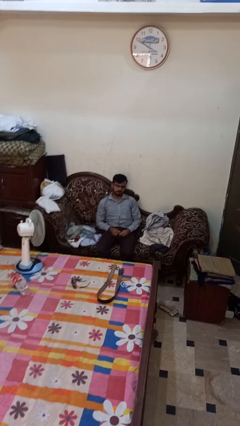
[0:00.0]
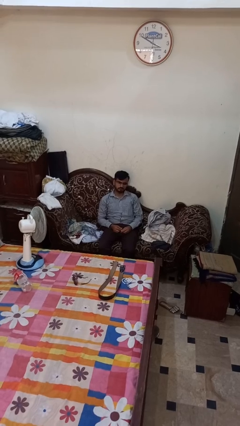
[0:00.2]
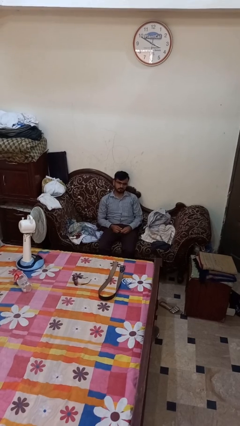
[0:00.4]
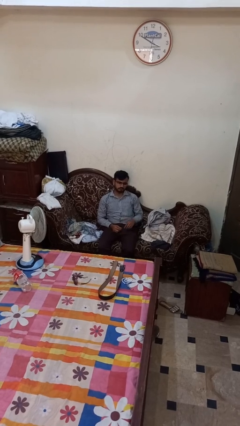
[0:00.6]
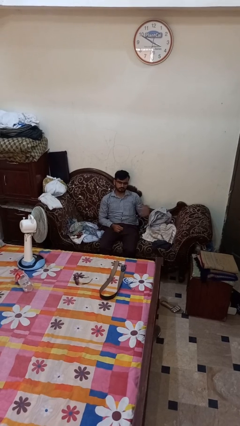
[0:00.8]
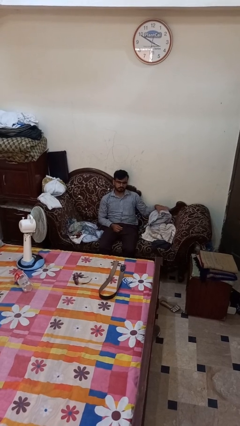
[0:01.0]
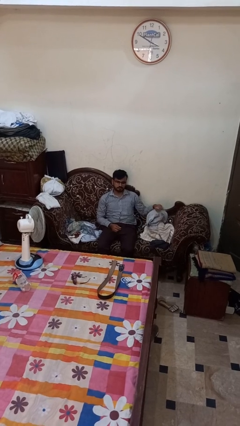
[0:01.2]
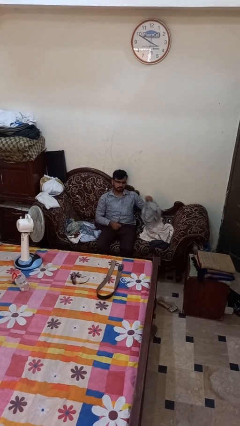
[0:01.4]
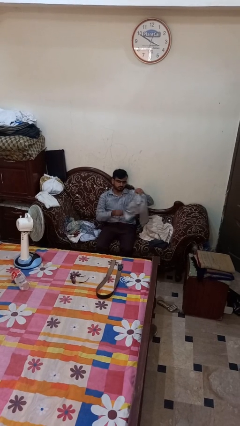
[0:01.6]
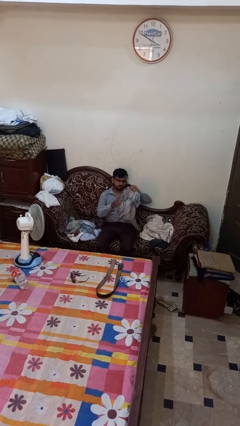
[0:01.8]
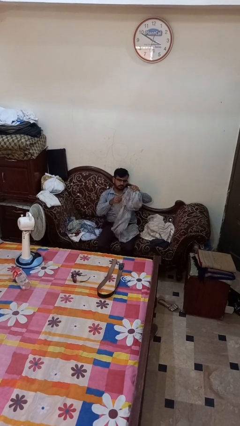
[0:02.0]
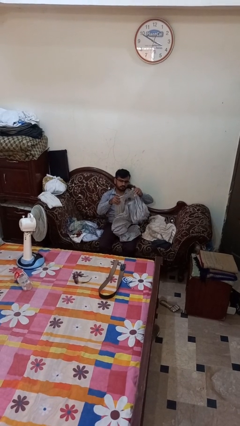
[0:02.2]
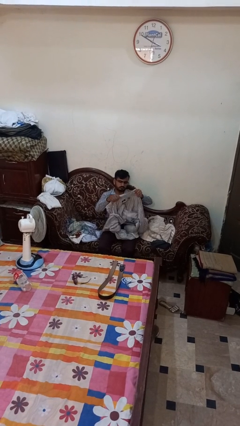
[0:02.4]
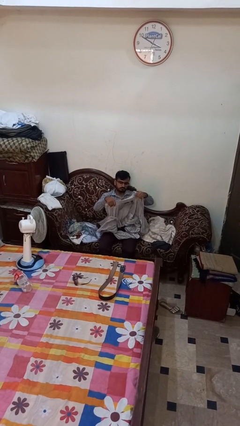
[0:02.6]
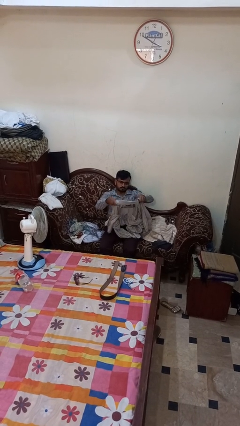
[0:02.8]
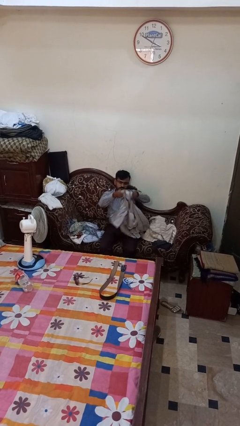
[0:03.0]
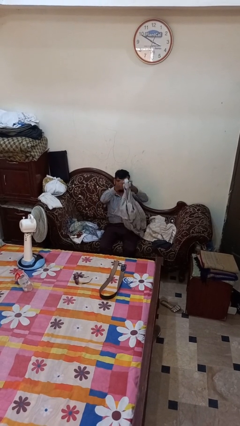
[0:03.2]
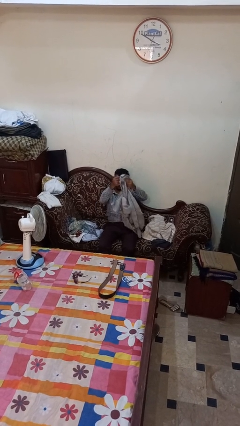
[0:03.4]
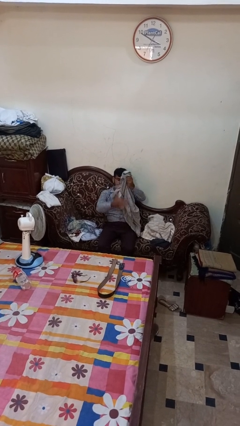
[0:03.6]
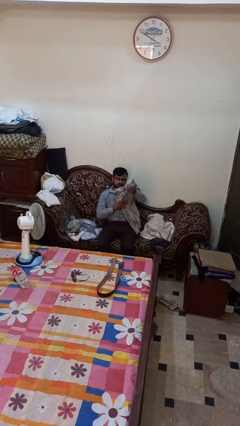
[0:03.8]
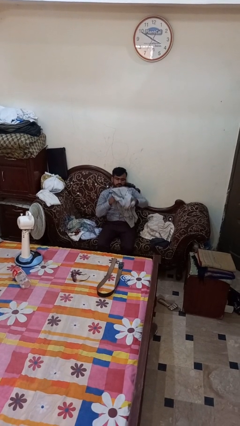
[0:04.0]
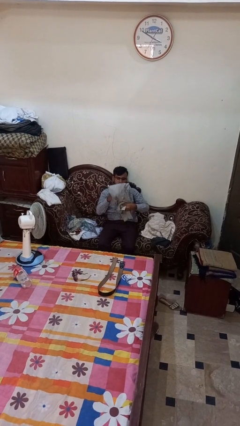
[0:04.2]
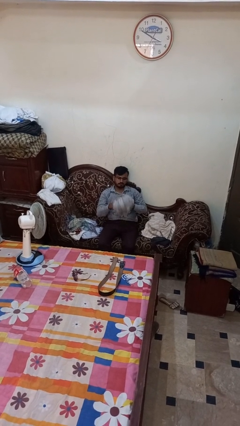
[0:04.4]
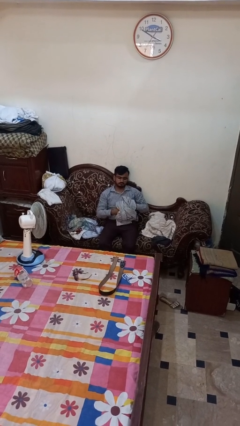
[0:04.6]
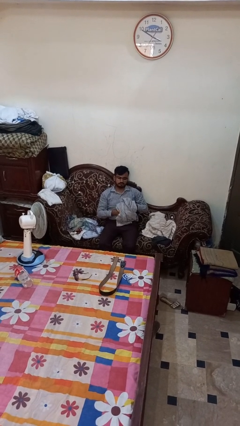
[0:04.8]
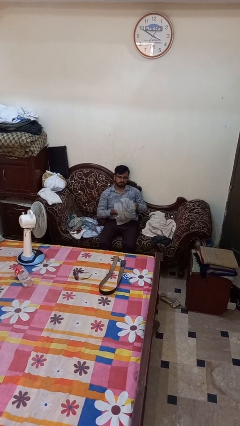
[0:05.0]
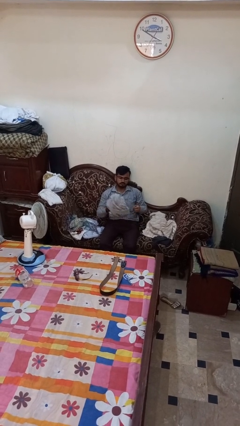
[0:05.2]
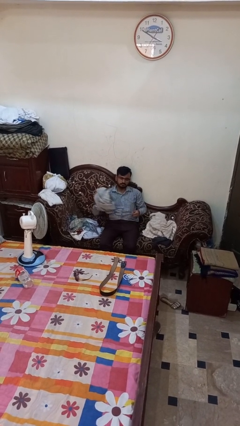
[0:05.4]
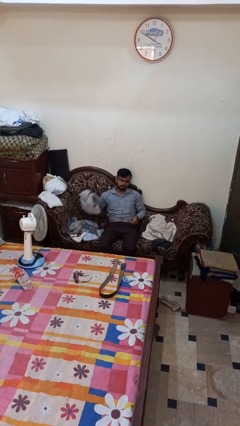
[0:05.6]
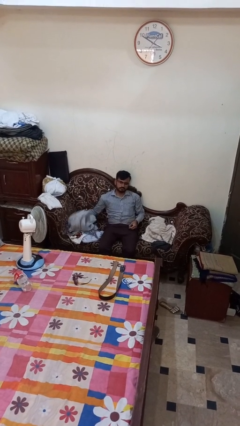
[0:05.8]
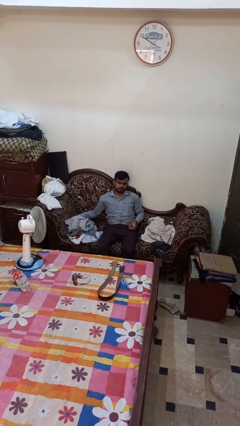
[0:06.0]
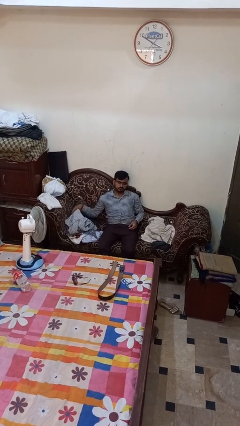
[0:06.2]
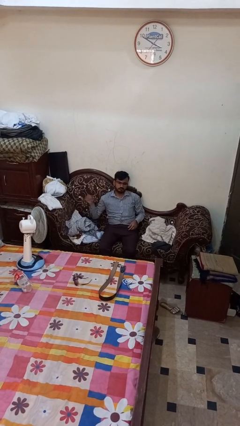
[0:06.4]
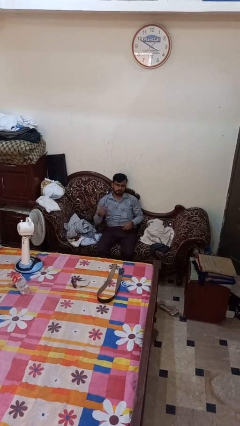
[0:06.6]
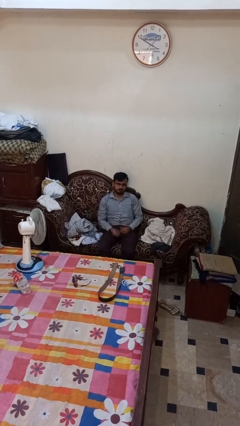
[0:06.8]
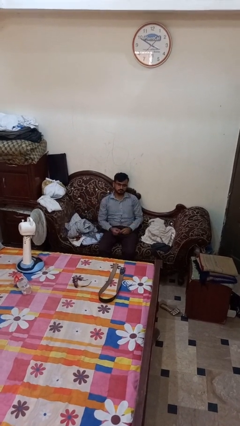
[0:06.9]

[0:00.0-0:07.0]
person folds shirt

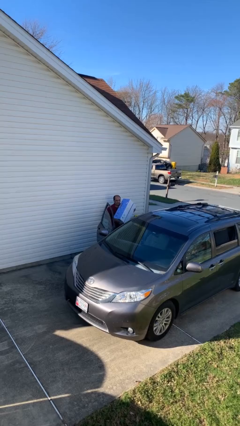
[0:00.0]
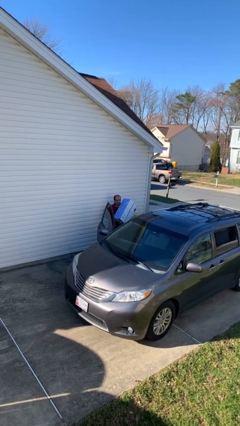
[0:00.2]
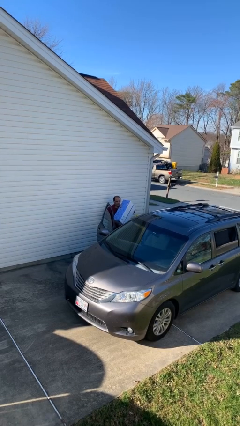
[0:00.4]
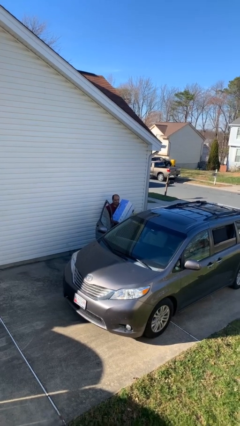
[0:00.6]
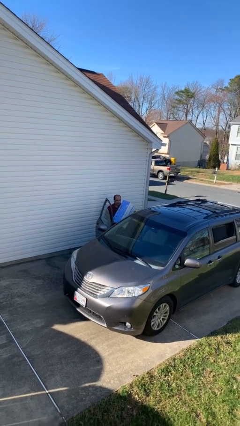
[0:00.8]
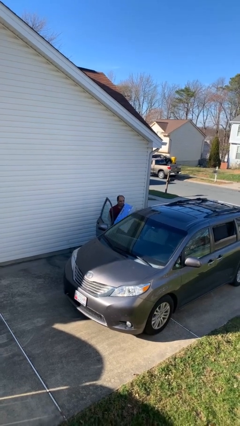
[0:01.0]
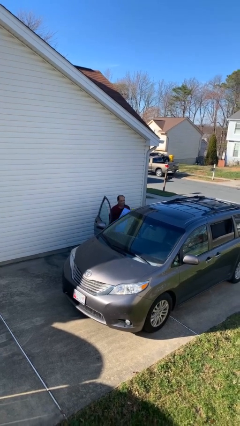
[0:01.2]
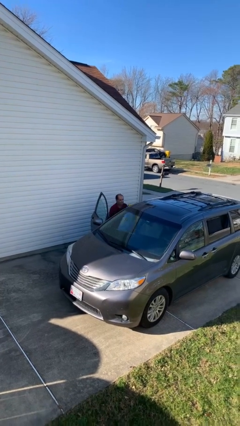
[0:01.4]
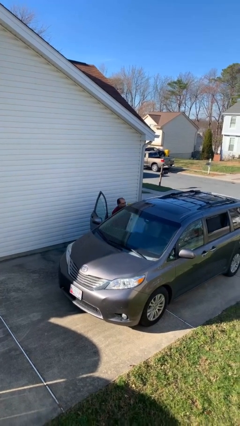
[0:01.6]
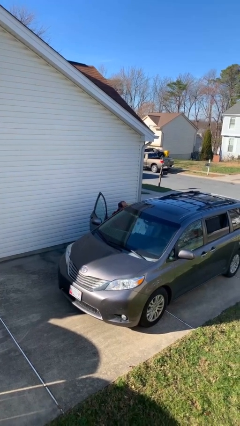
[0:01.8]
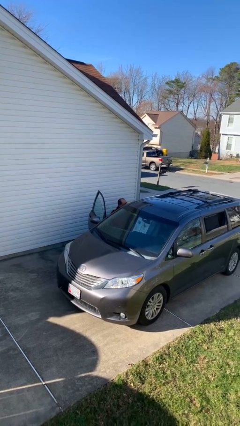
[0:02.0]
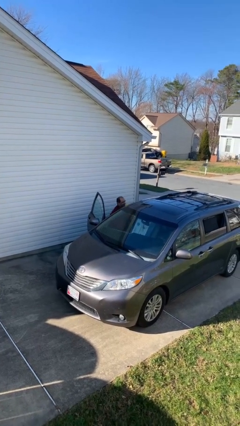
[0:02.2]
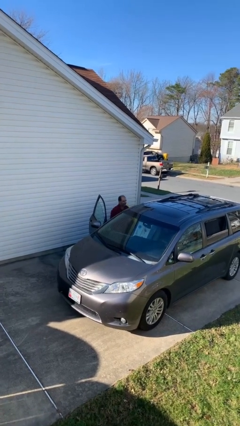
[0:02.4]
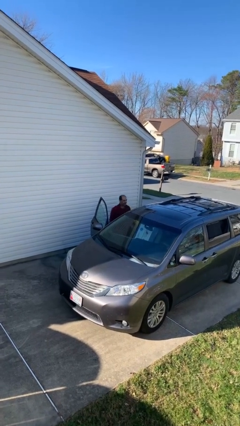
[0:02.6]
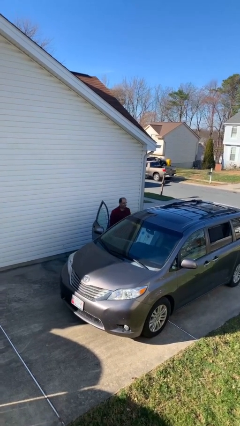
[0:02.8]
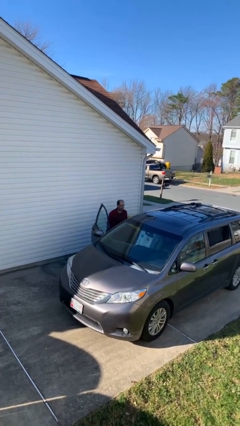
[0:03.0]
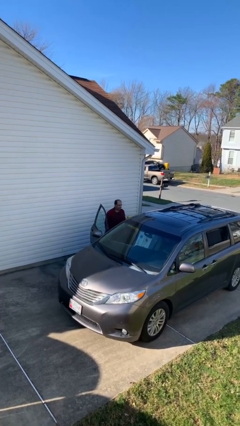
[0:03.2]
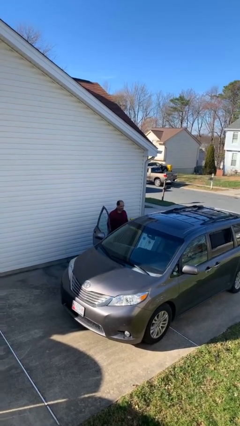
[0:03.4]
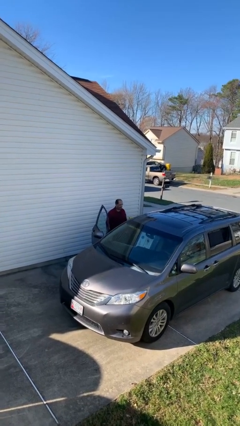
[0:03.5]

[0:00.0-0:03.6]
person loads car

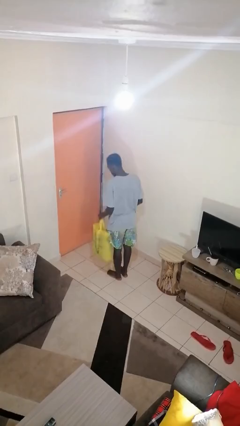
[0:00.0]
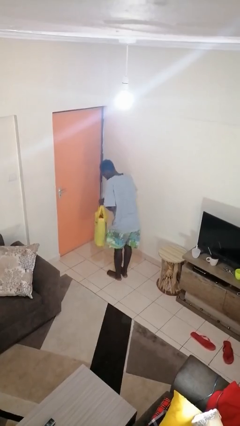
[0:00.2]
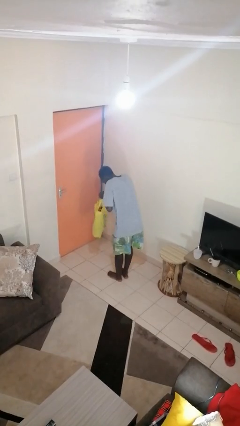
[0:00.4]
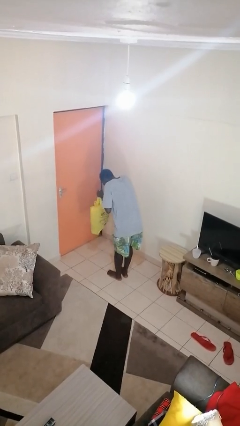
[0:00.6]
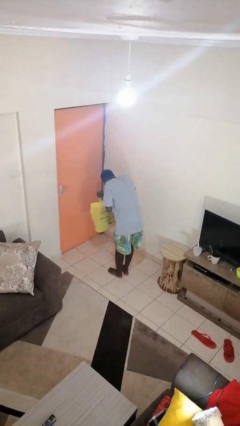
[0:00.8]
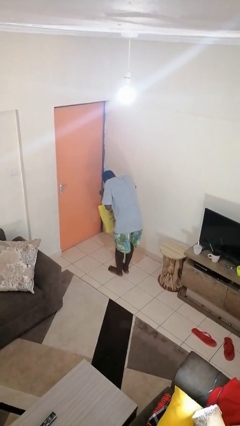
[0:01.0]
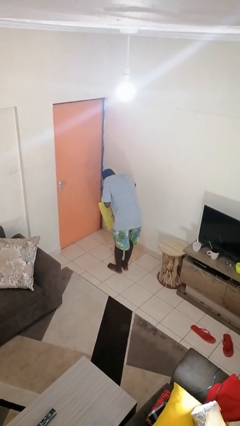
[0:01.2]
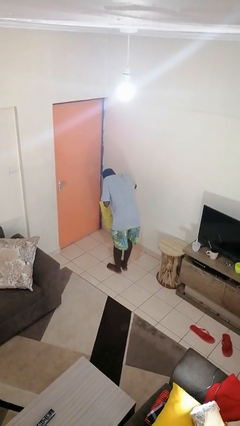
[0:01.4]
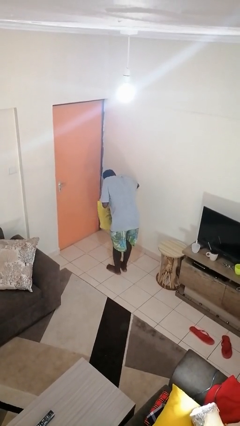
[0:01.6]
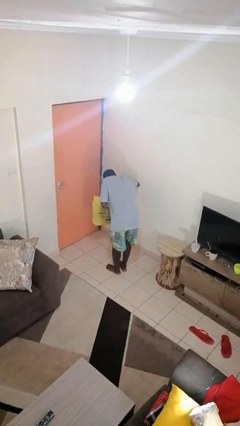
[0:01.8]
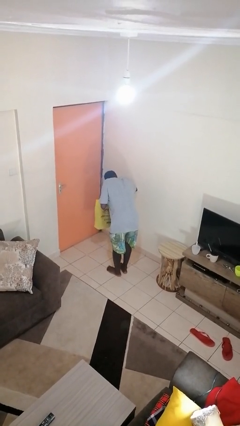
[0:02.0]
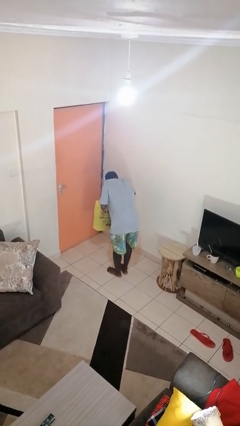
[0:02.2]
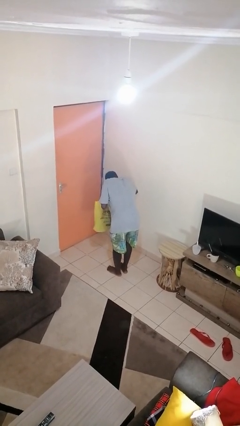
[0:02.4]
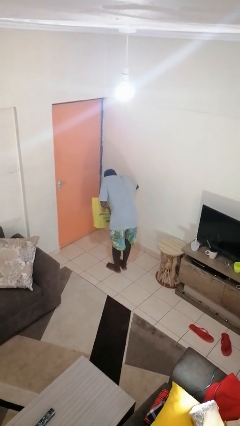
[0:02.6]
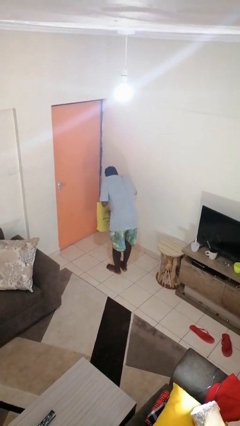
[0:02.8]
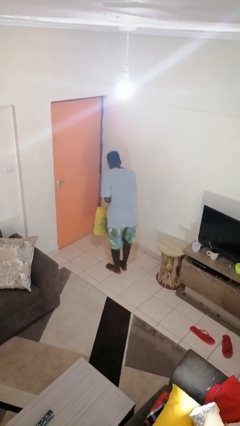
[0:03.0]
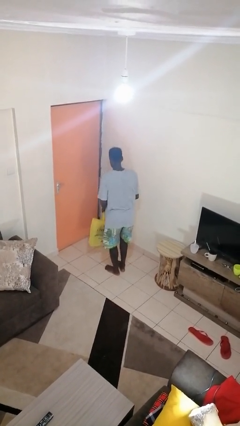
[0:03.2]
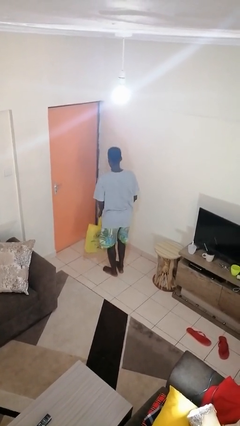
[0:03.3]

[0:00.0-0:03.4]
person searches in bag

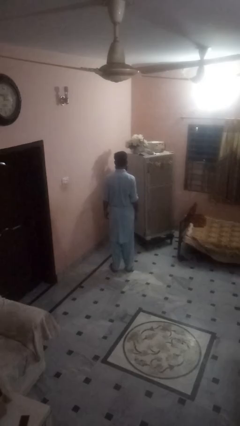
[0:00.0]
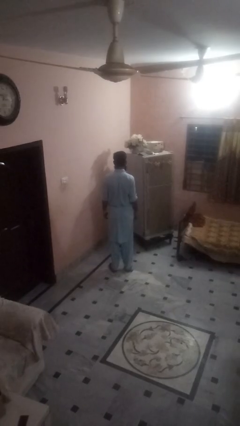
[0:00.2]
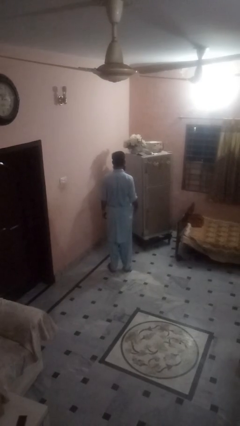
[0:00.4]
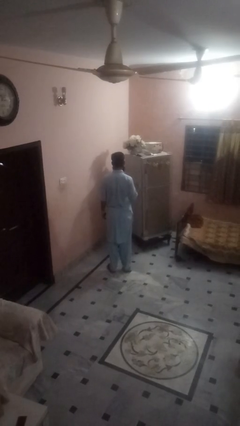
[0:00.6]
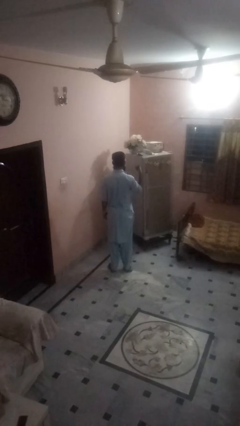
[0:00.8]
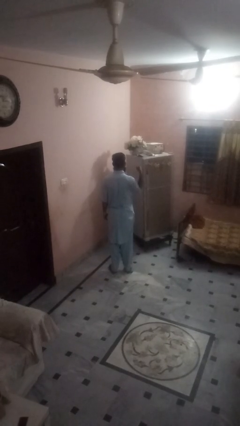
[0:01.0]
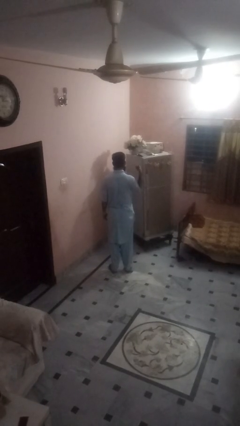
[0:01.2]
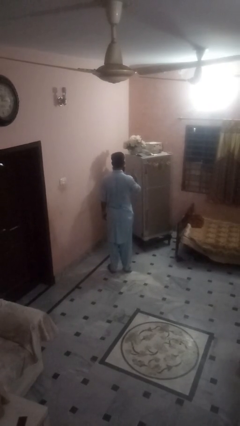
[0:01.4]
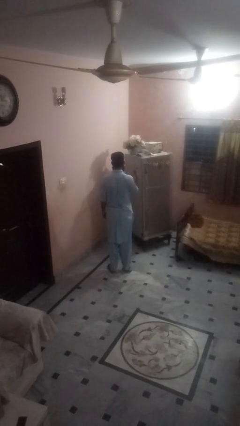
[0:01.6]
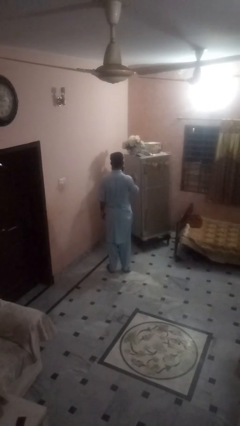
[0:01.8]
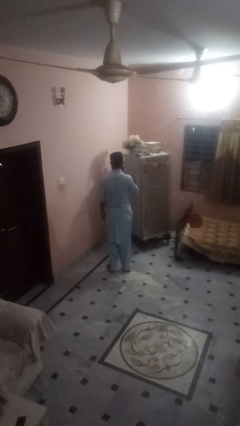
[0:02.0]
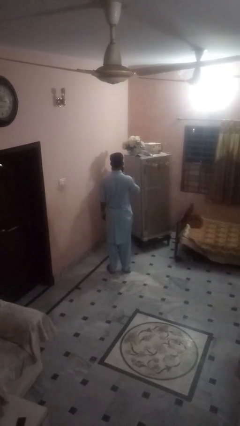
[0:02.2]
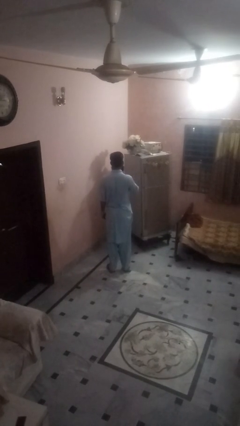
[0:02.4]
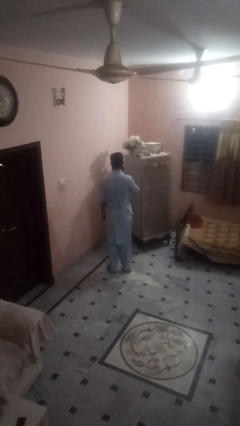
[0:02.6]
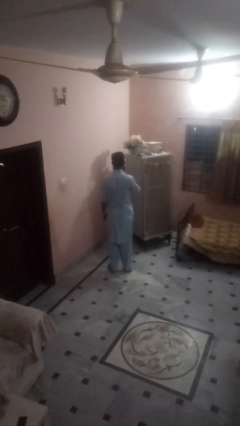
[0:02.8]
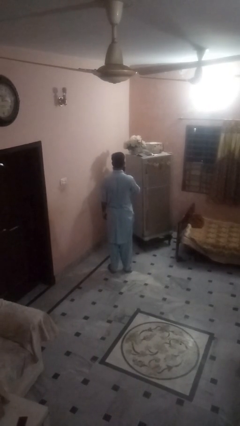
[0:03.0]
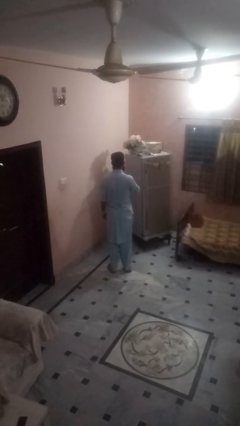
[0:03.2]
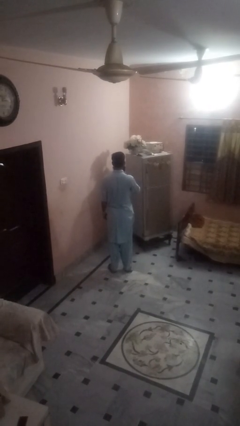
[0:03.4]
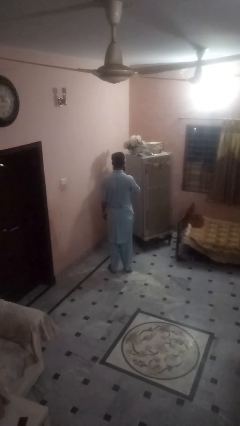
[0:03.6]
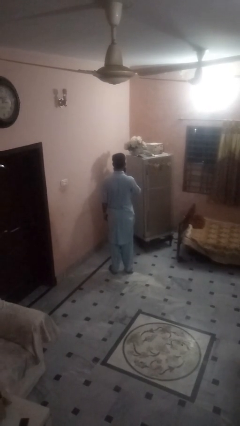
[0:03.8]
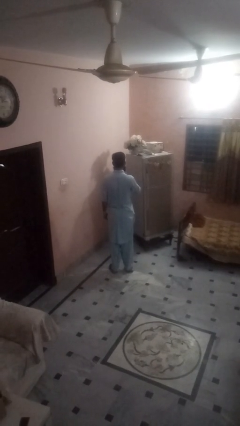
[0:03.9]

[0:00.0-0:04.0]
person gestures hang loose
